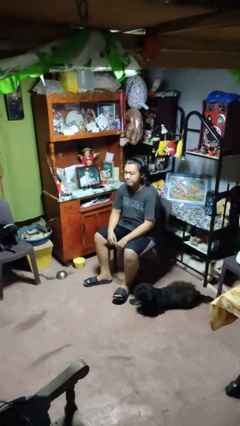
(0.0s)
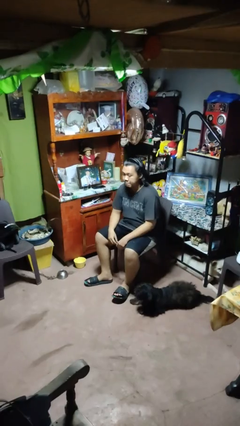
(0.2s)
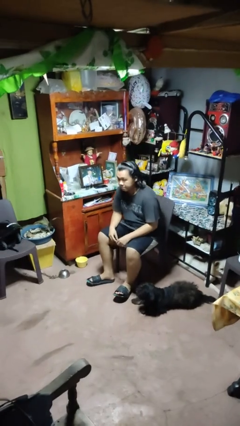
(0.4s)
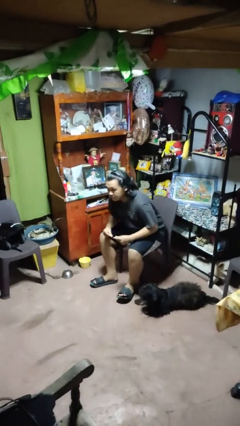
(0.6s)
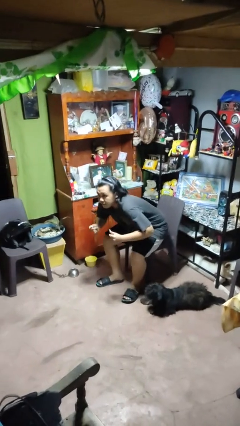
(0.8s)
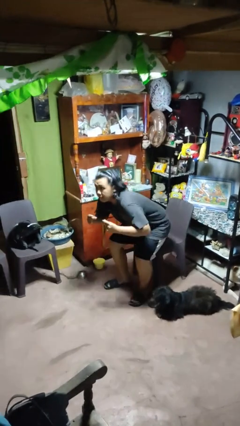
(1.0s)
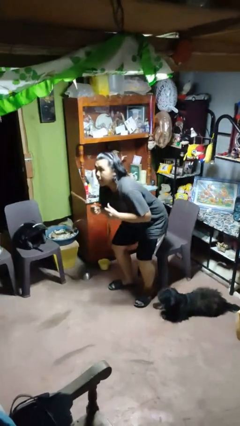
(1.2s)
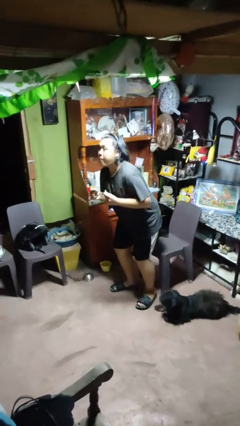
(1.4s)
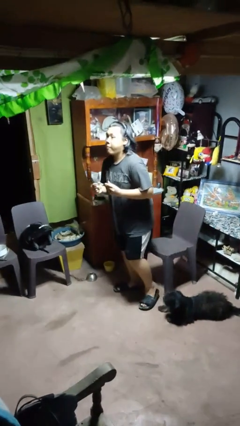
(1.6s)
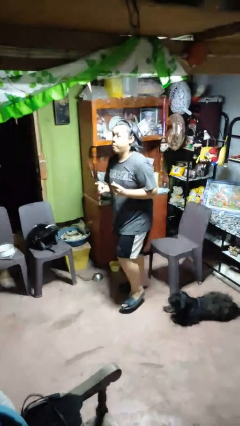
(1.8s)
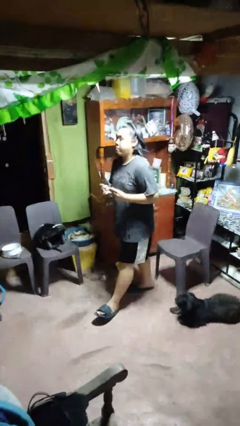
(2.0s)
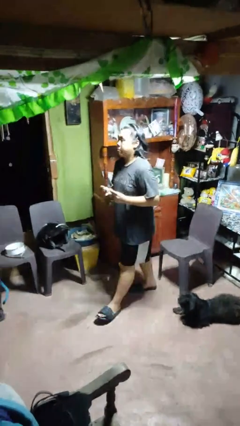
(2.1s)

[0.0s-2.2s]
person snaps fingers

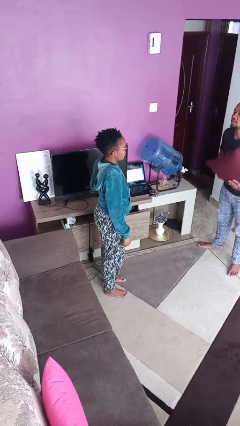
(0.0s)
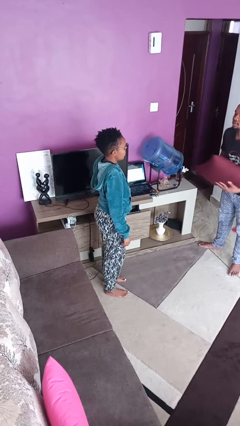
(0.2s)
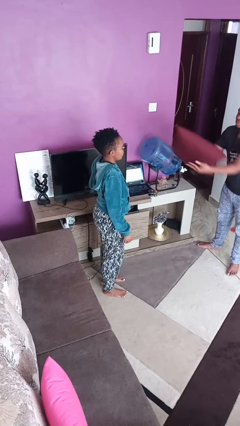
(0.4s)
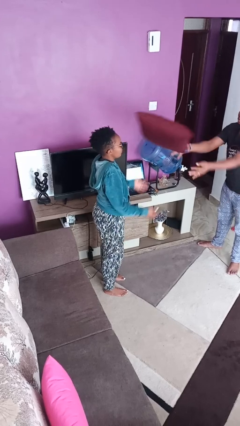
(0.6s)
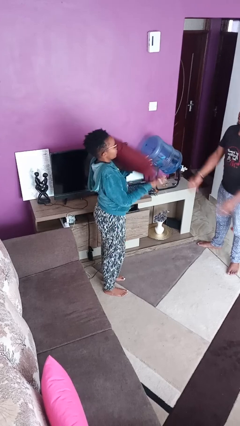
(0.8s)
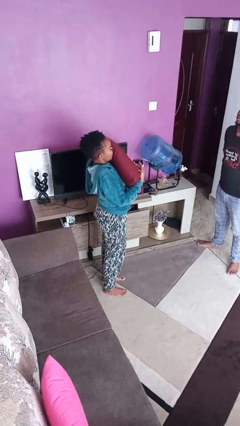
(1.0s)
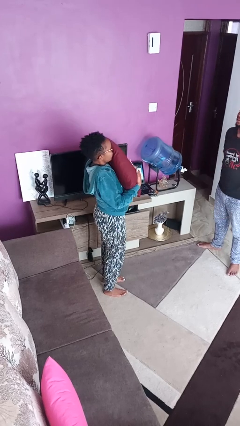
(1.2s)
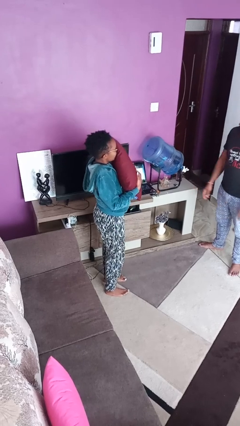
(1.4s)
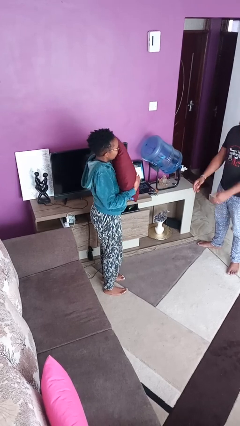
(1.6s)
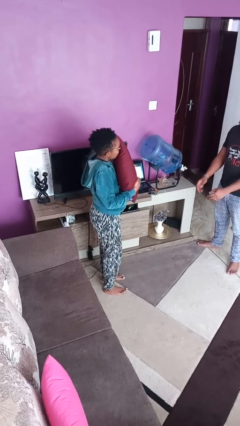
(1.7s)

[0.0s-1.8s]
person catches object from person

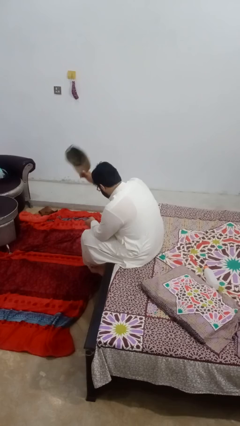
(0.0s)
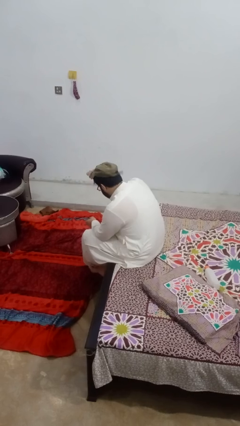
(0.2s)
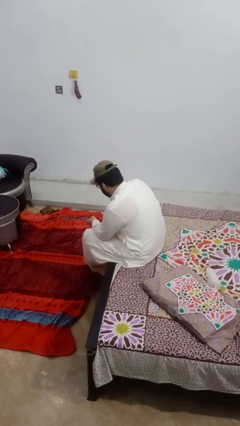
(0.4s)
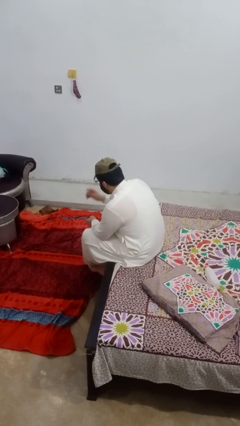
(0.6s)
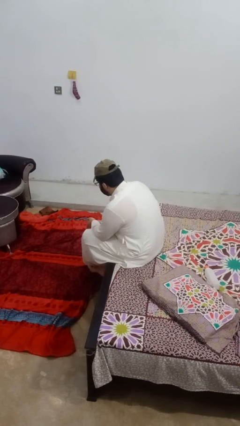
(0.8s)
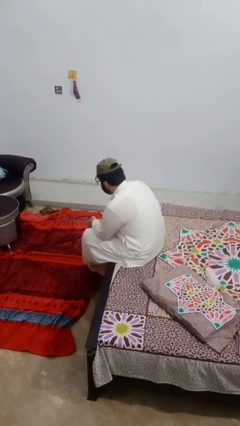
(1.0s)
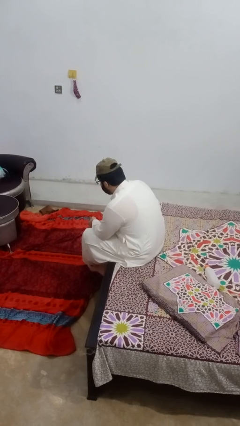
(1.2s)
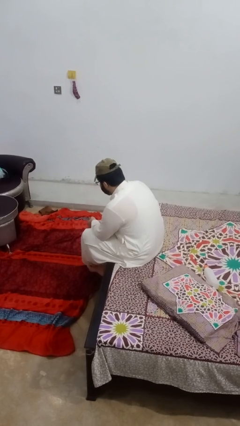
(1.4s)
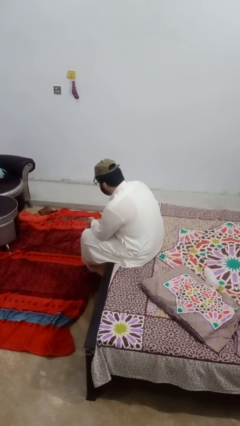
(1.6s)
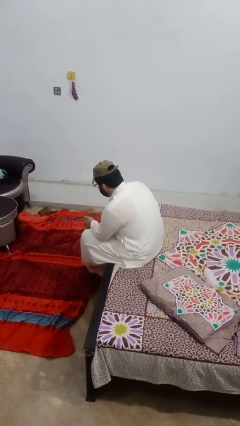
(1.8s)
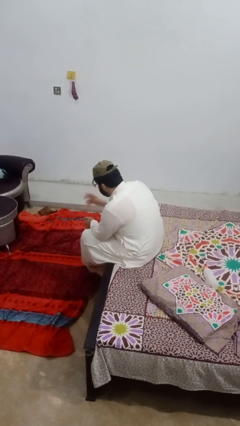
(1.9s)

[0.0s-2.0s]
person puts on hat

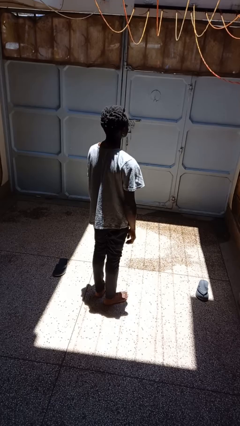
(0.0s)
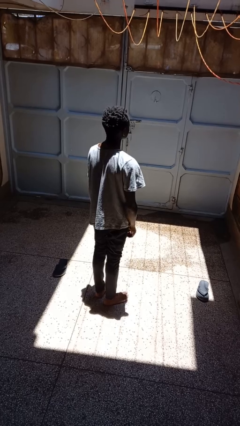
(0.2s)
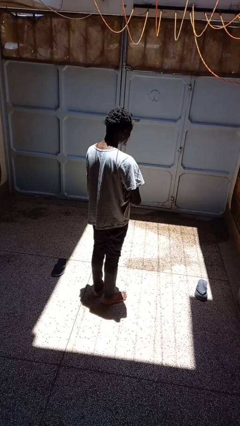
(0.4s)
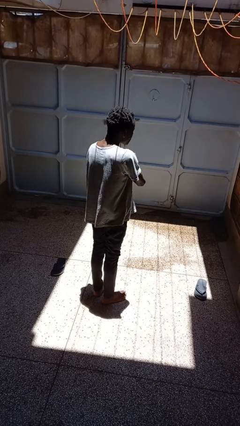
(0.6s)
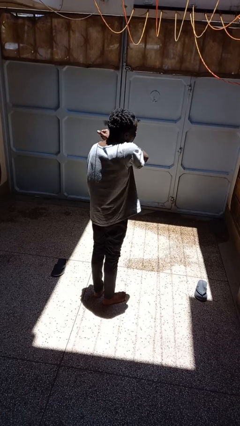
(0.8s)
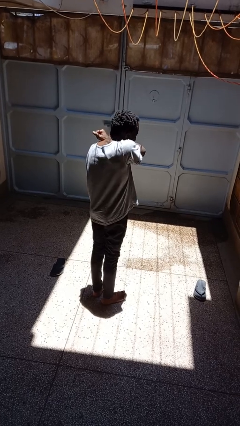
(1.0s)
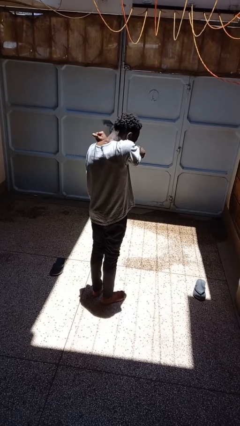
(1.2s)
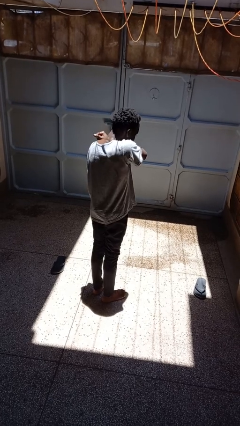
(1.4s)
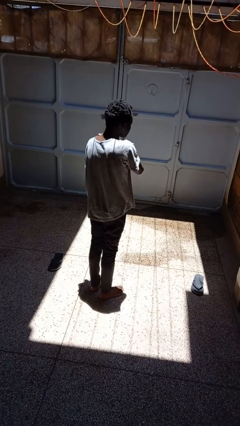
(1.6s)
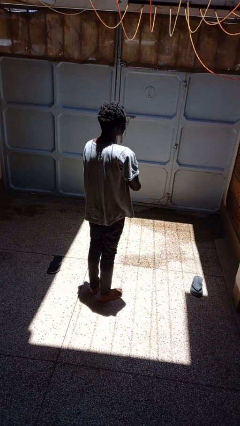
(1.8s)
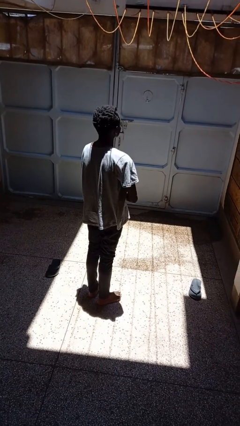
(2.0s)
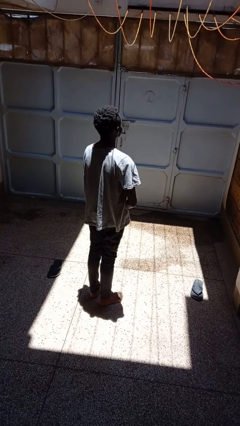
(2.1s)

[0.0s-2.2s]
person sneezes into arm

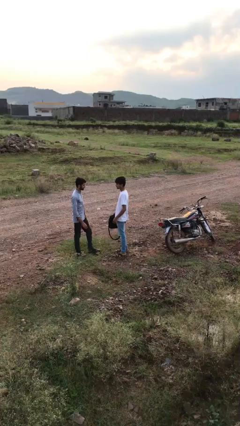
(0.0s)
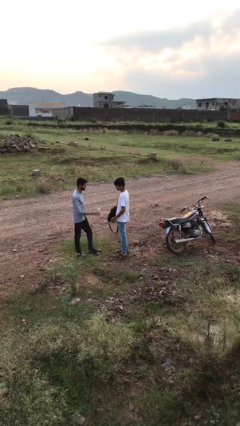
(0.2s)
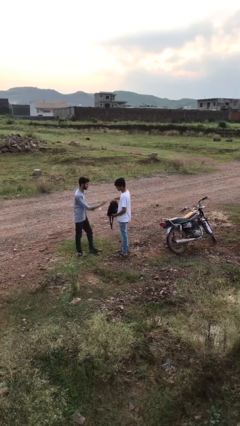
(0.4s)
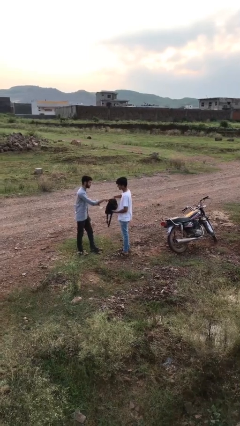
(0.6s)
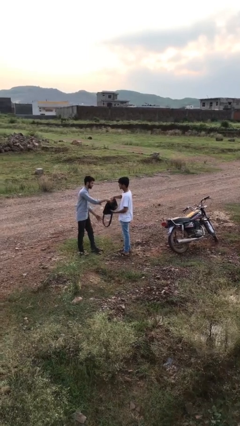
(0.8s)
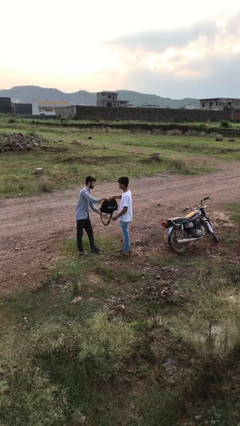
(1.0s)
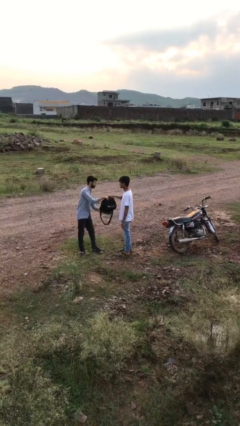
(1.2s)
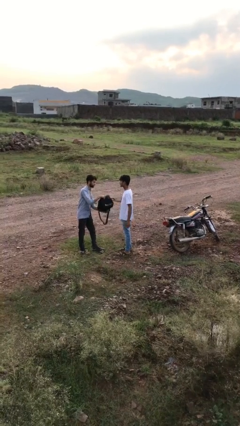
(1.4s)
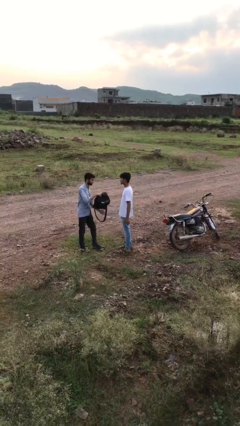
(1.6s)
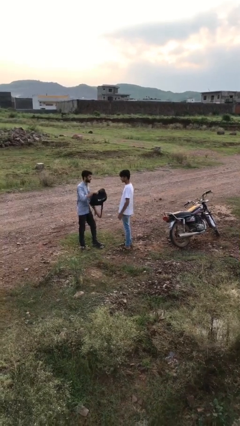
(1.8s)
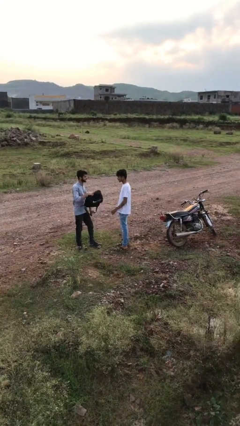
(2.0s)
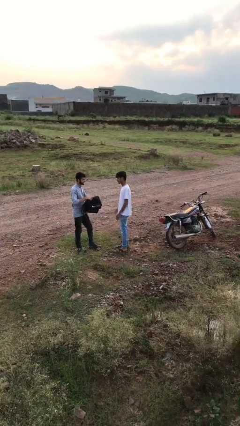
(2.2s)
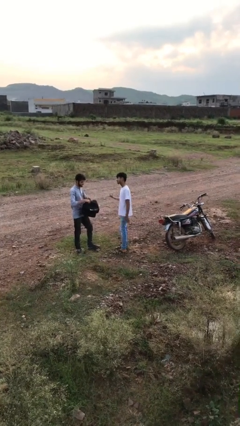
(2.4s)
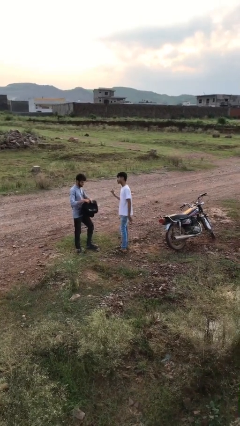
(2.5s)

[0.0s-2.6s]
person transfers object to person

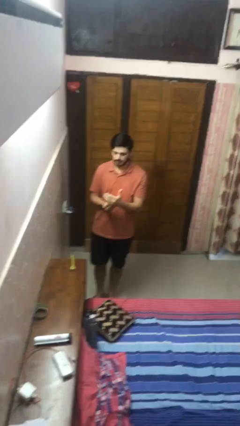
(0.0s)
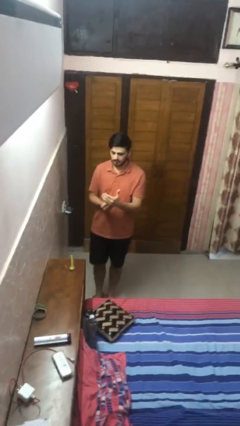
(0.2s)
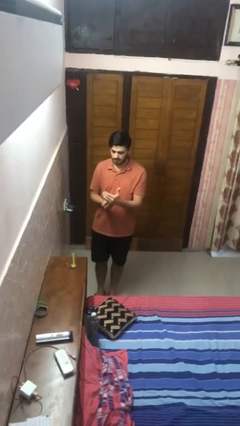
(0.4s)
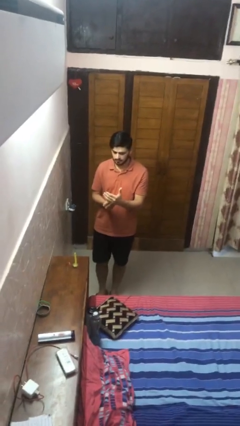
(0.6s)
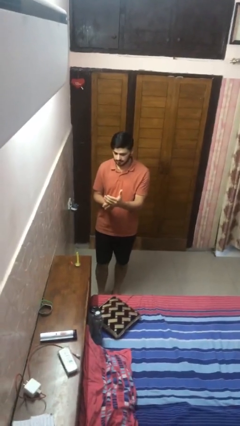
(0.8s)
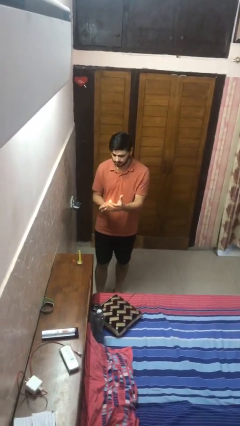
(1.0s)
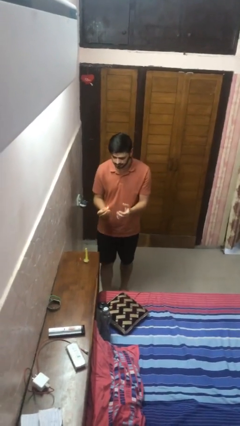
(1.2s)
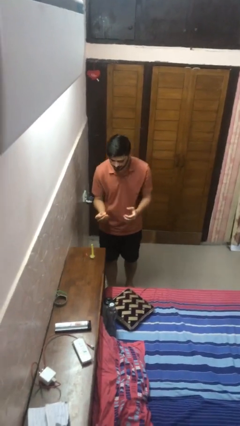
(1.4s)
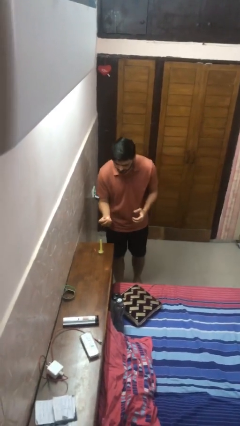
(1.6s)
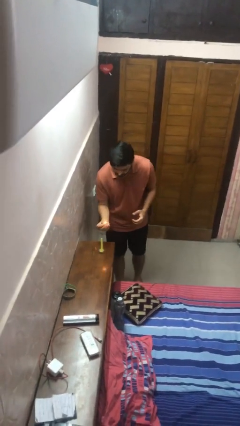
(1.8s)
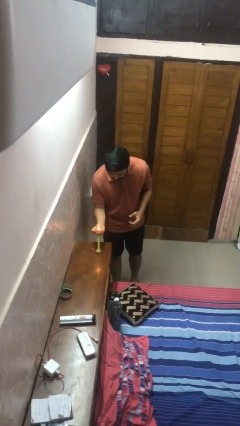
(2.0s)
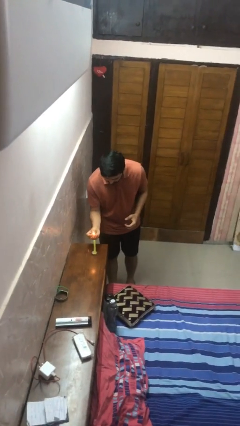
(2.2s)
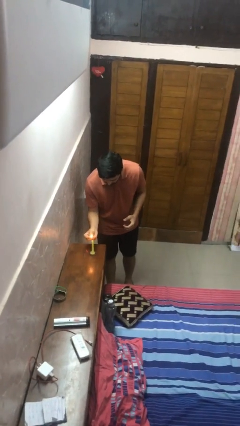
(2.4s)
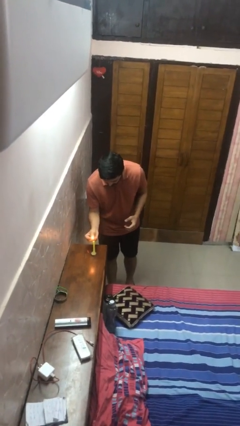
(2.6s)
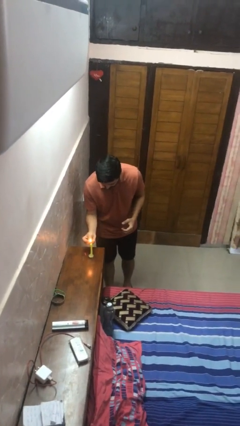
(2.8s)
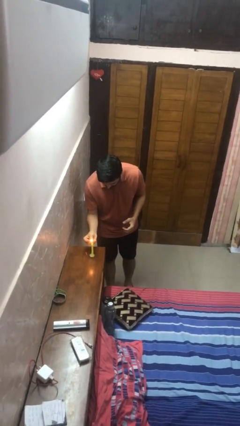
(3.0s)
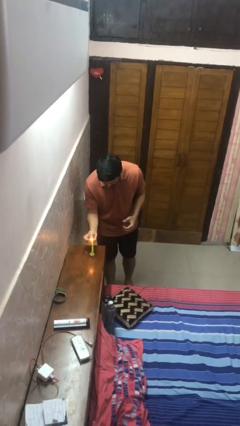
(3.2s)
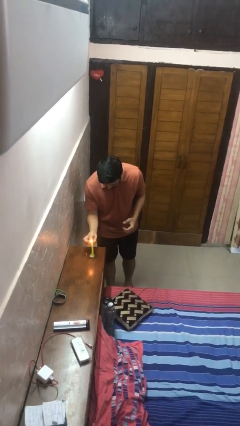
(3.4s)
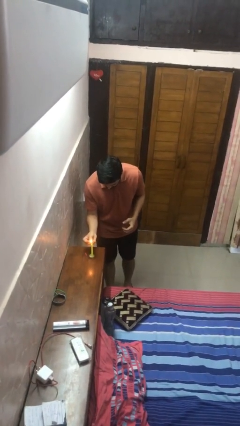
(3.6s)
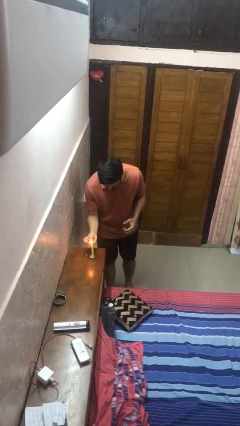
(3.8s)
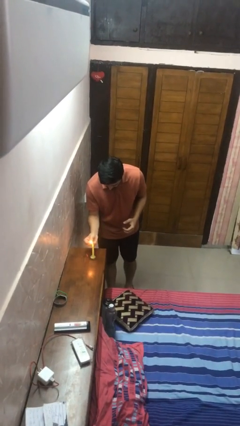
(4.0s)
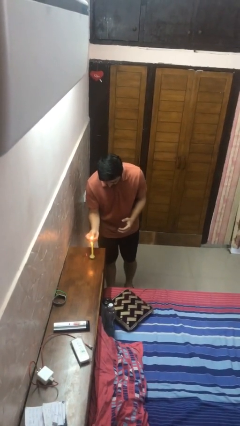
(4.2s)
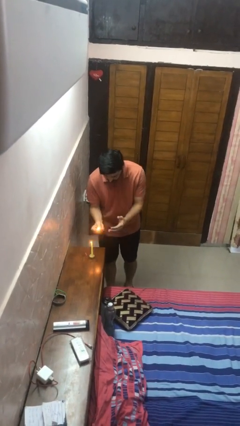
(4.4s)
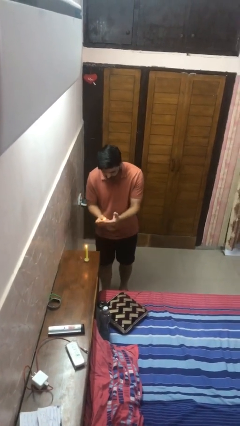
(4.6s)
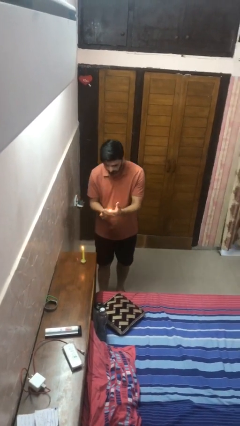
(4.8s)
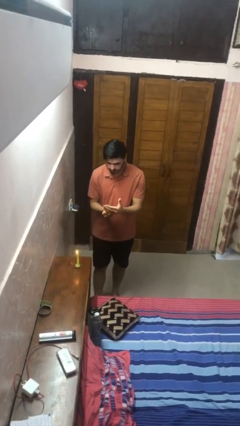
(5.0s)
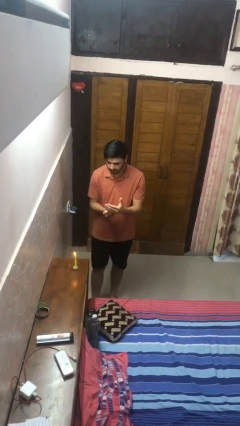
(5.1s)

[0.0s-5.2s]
person lights candle

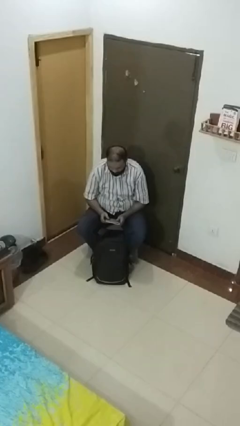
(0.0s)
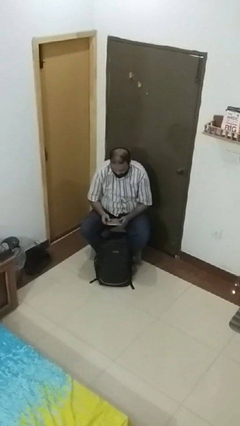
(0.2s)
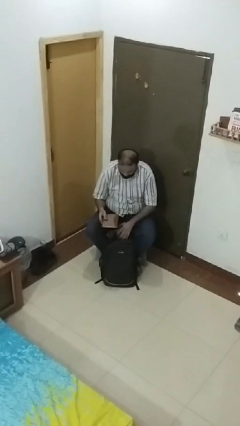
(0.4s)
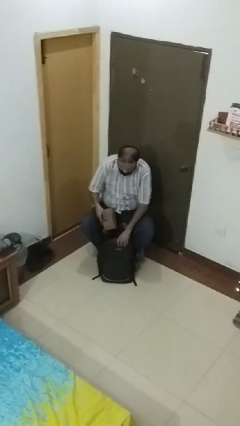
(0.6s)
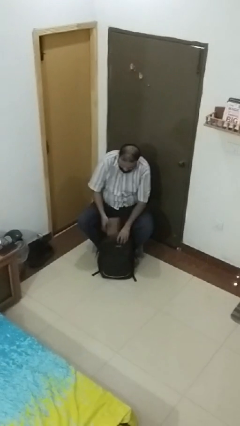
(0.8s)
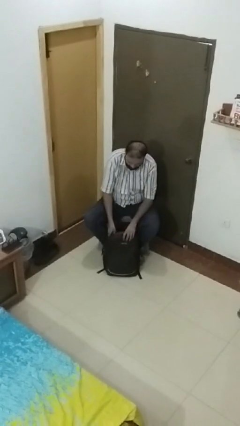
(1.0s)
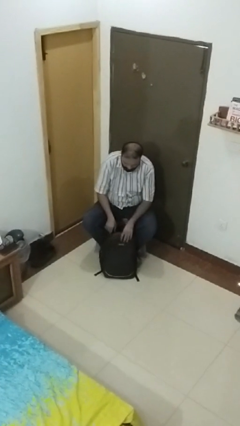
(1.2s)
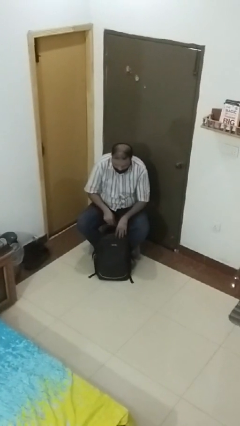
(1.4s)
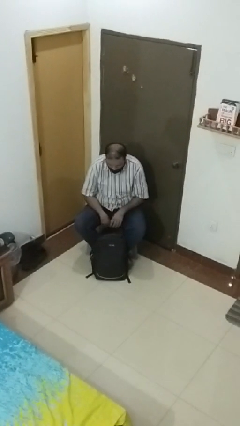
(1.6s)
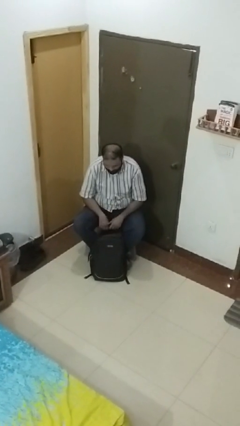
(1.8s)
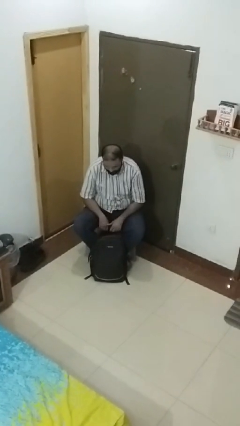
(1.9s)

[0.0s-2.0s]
person puts object into backpack
